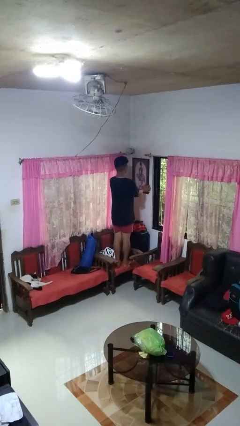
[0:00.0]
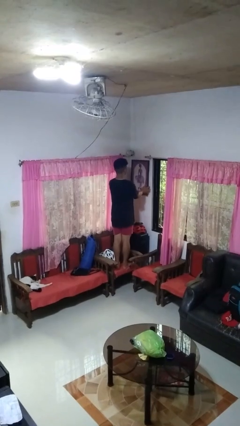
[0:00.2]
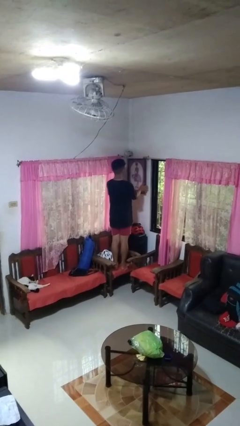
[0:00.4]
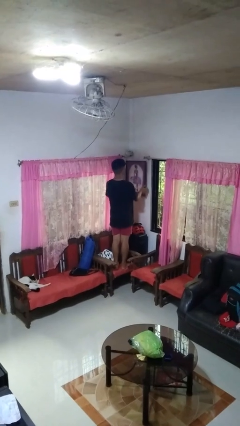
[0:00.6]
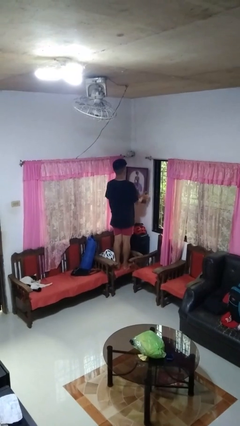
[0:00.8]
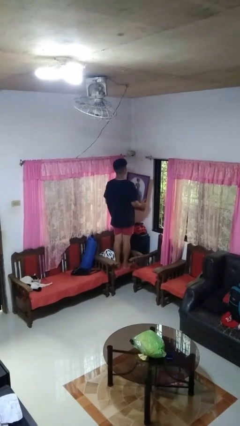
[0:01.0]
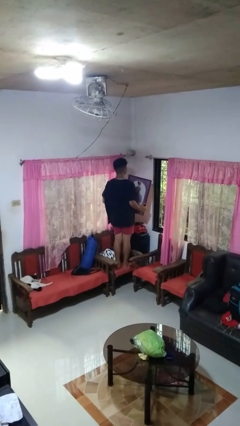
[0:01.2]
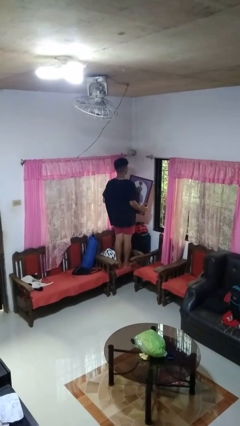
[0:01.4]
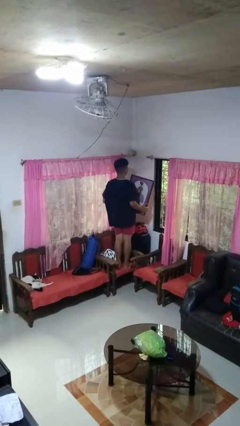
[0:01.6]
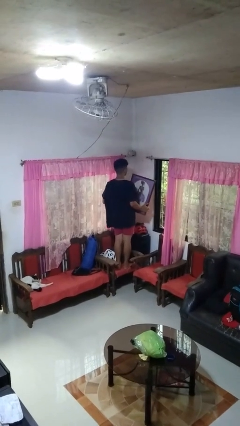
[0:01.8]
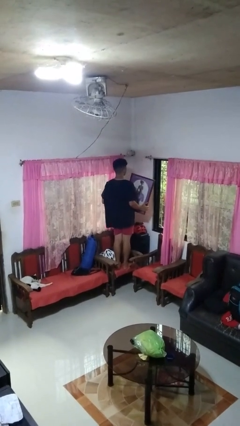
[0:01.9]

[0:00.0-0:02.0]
person takes down picture frame

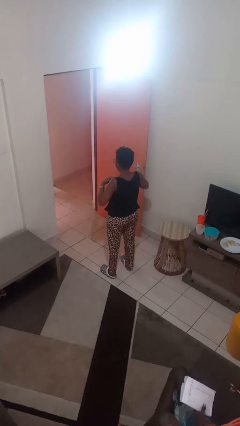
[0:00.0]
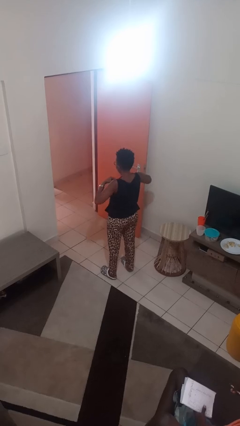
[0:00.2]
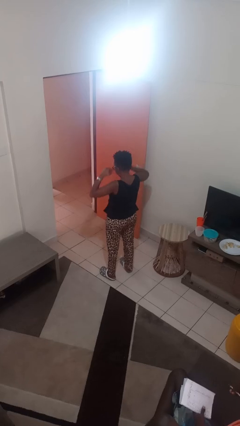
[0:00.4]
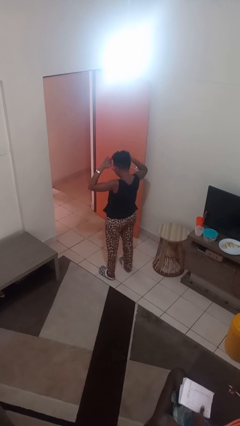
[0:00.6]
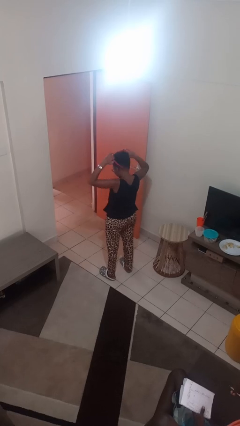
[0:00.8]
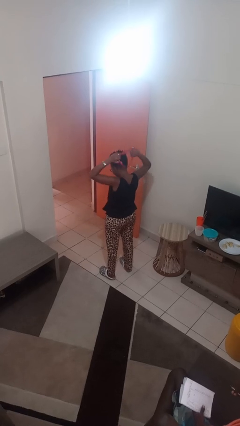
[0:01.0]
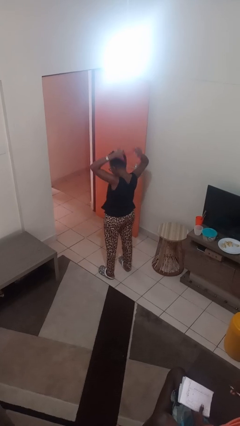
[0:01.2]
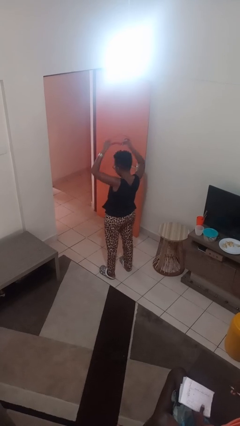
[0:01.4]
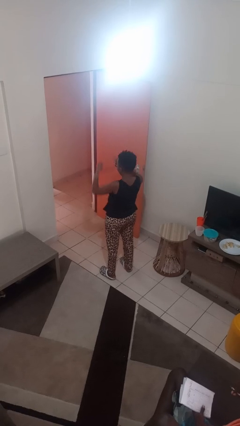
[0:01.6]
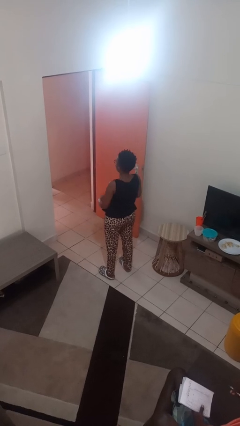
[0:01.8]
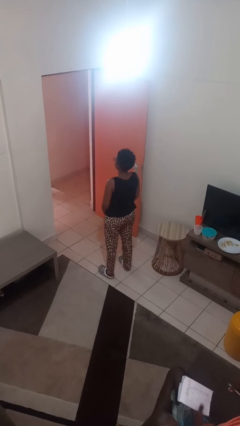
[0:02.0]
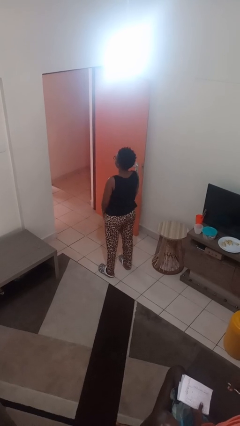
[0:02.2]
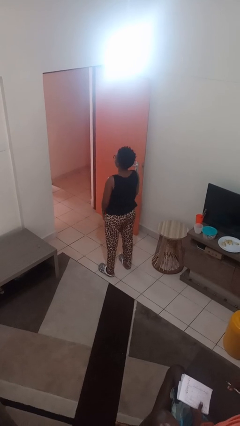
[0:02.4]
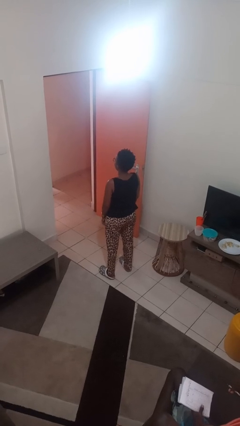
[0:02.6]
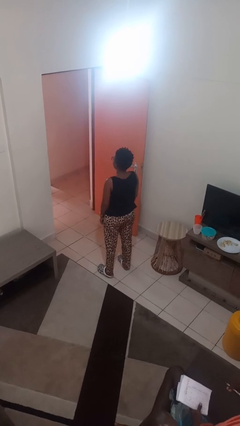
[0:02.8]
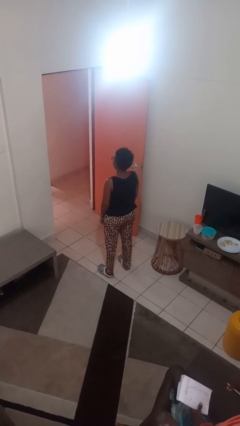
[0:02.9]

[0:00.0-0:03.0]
person takes off necklace

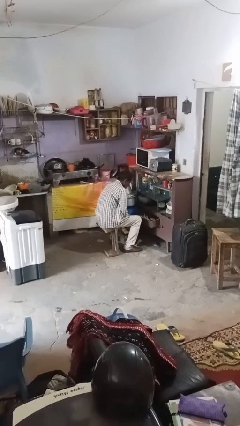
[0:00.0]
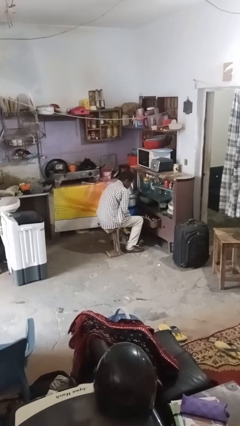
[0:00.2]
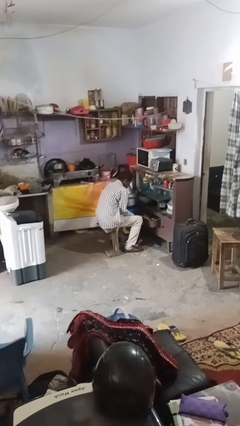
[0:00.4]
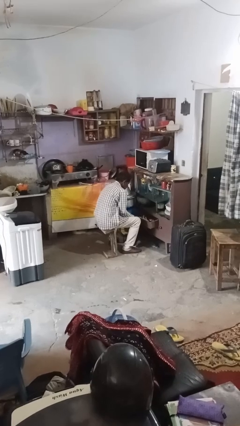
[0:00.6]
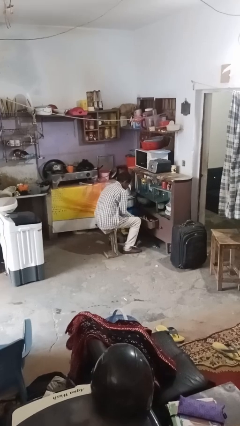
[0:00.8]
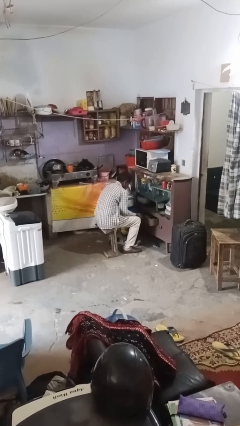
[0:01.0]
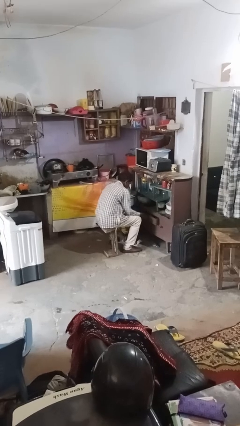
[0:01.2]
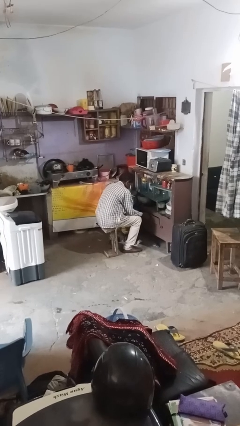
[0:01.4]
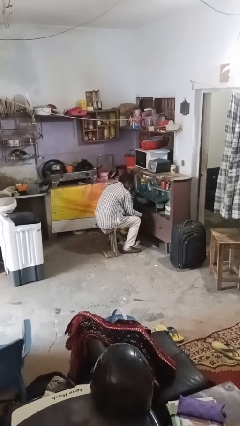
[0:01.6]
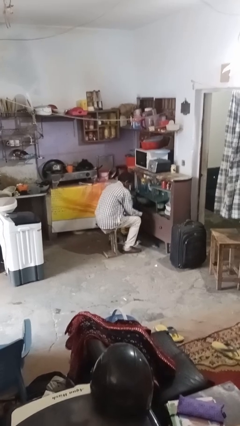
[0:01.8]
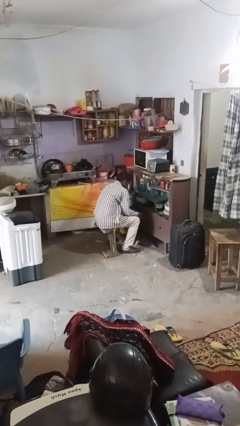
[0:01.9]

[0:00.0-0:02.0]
person closes kitchen drawer

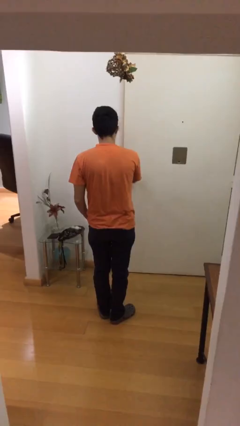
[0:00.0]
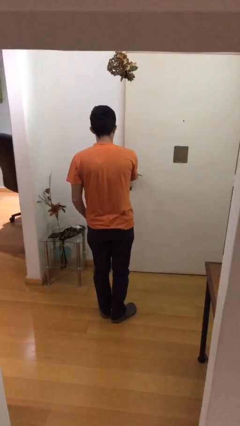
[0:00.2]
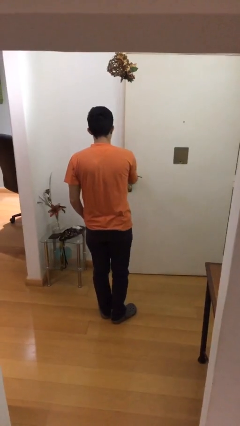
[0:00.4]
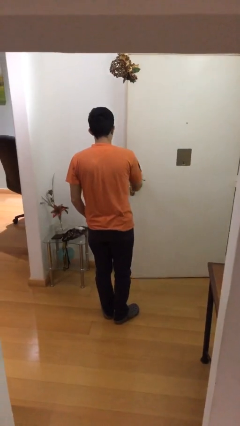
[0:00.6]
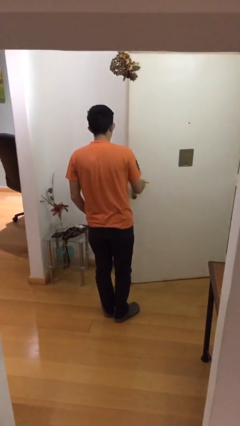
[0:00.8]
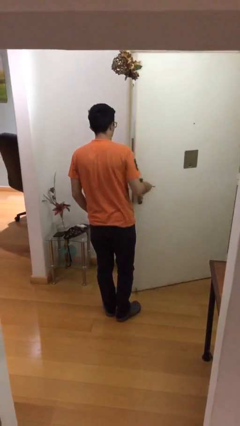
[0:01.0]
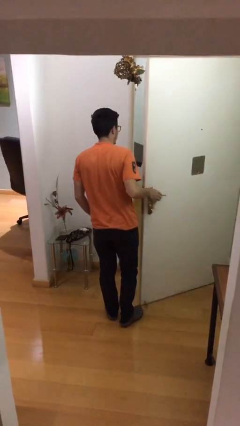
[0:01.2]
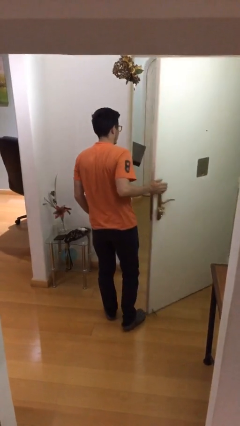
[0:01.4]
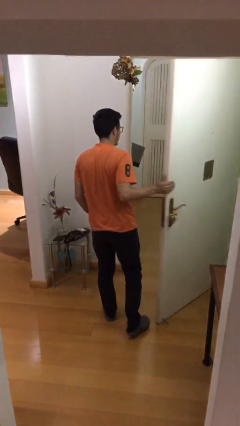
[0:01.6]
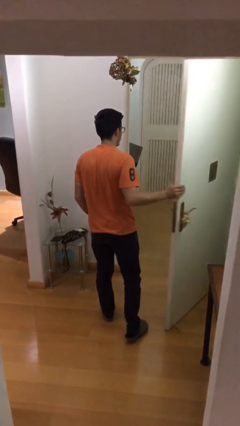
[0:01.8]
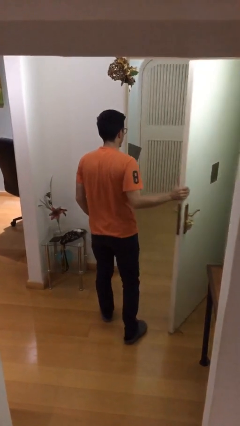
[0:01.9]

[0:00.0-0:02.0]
person opens facility door

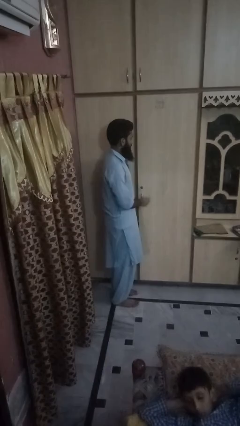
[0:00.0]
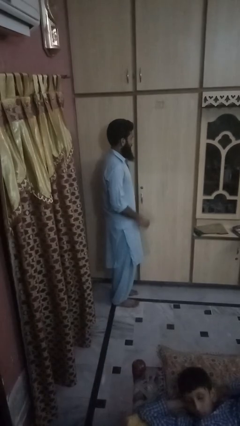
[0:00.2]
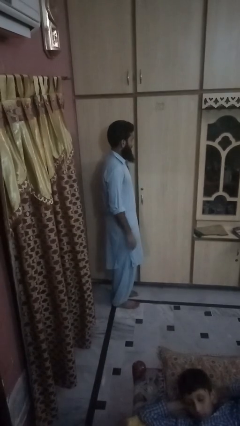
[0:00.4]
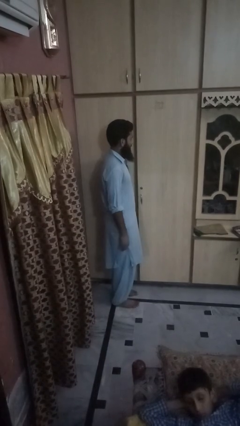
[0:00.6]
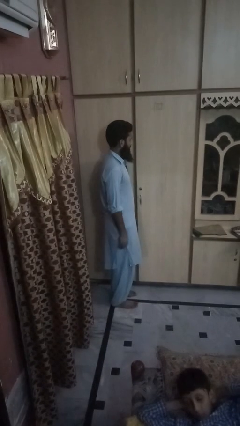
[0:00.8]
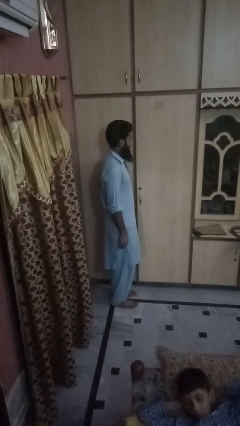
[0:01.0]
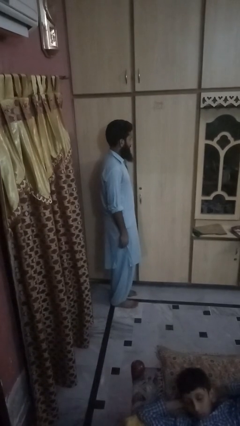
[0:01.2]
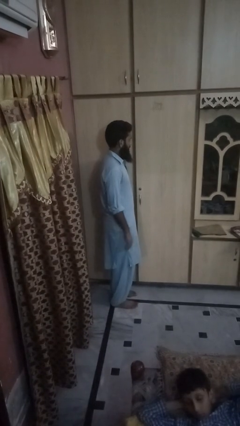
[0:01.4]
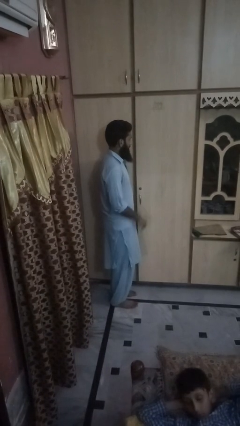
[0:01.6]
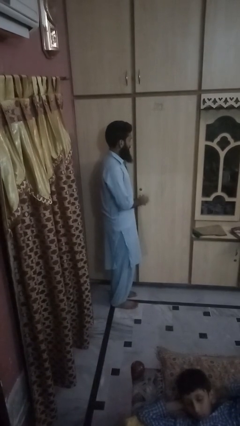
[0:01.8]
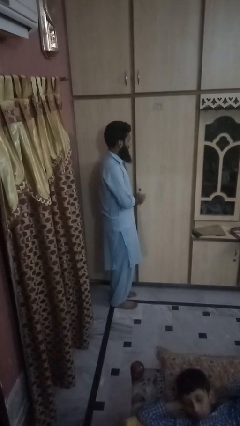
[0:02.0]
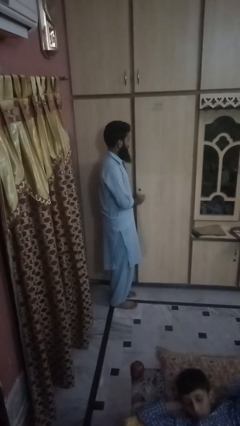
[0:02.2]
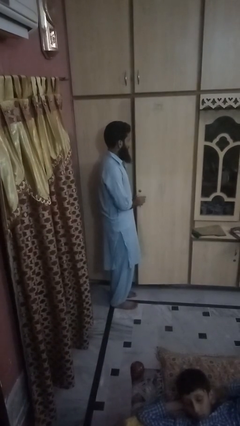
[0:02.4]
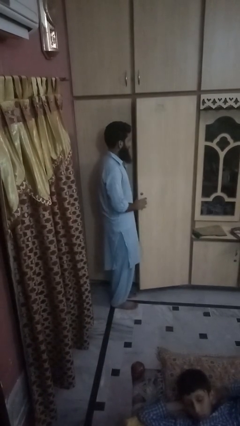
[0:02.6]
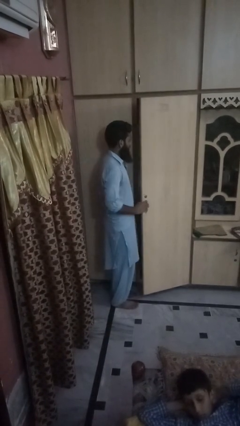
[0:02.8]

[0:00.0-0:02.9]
person opens dresser drawer

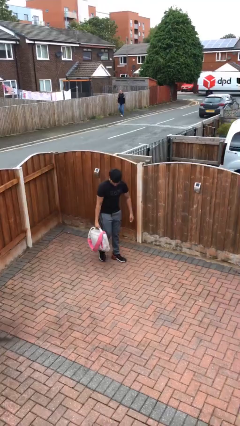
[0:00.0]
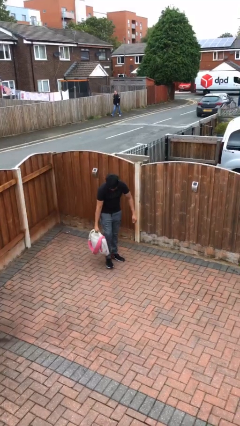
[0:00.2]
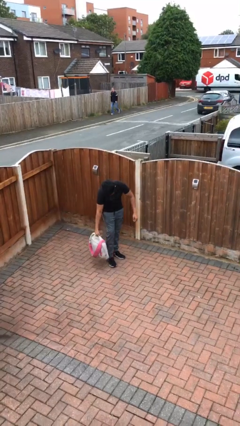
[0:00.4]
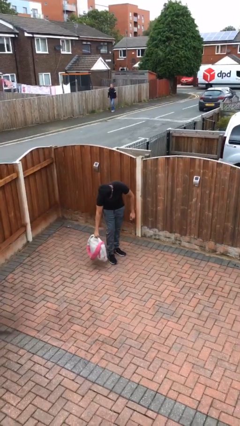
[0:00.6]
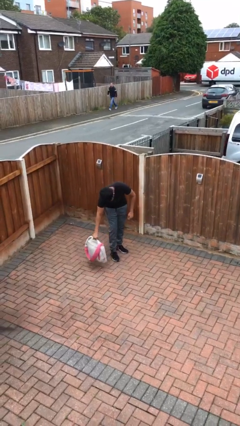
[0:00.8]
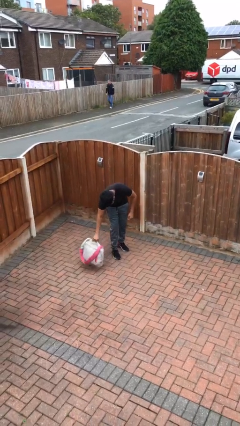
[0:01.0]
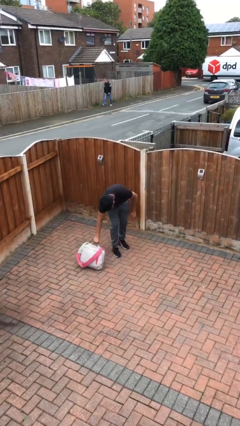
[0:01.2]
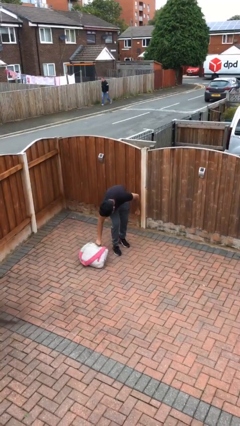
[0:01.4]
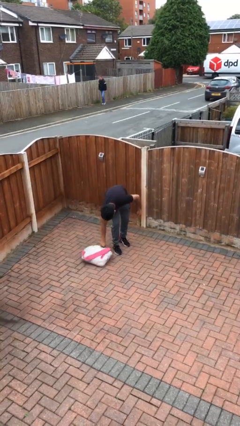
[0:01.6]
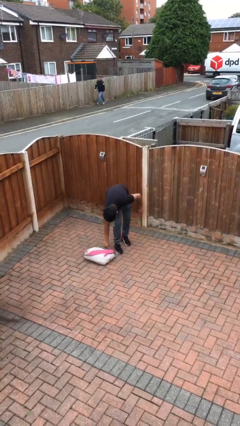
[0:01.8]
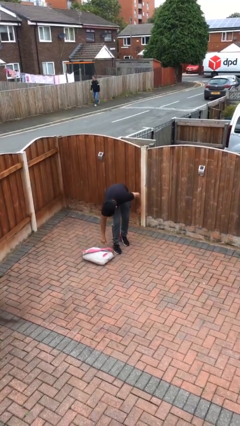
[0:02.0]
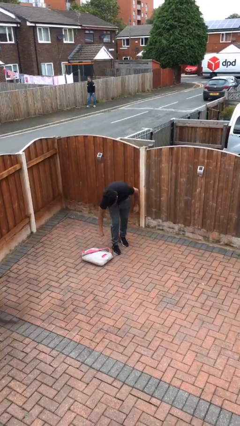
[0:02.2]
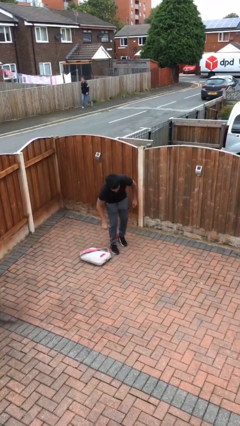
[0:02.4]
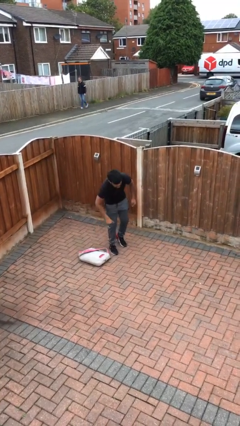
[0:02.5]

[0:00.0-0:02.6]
person puts down object on floor

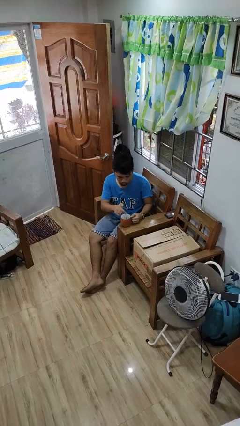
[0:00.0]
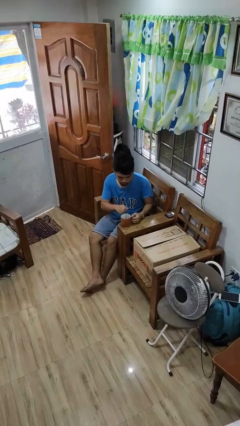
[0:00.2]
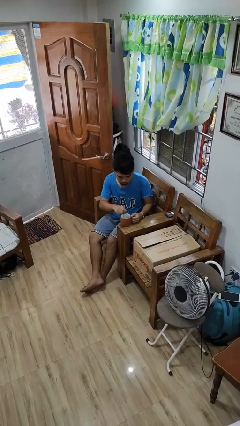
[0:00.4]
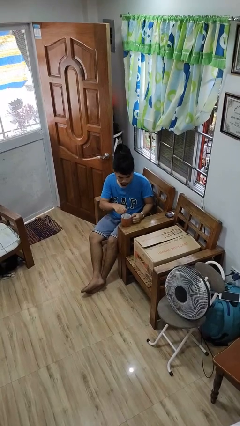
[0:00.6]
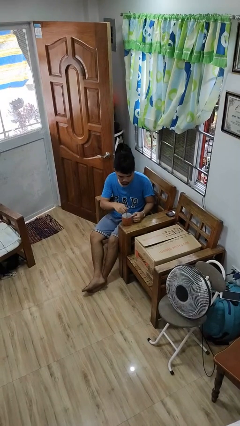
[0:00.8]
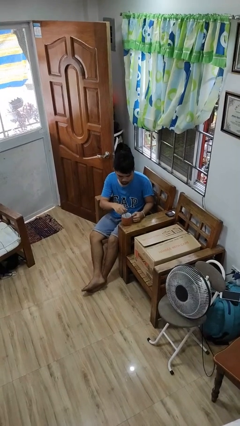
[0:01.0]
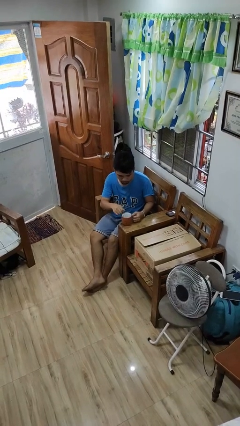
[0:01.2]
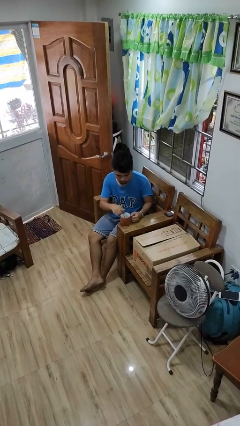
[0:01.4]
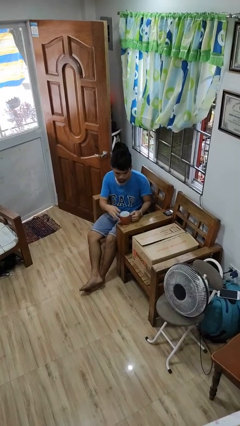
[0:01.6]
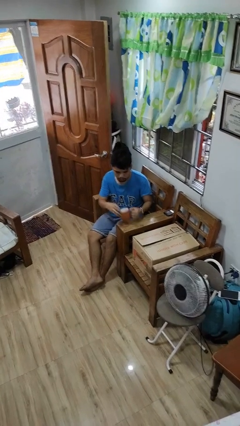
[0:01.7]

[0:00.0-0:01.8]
person stirs mug

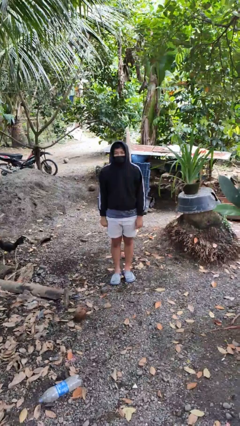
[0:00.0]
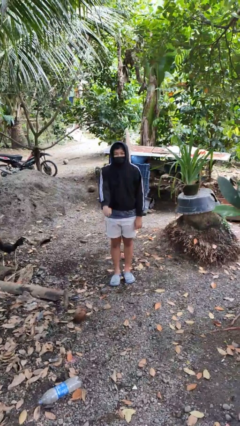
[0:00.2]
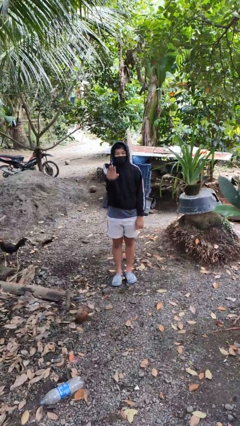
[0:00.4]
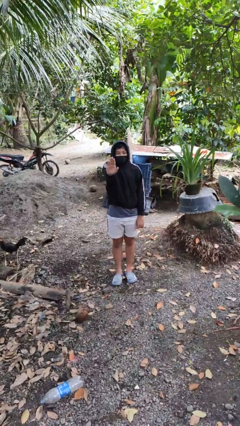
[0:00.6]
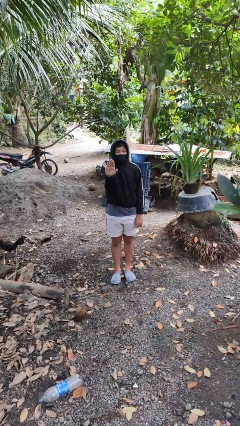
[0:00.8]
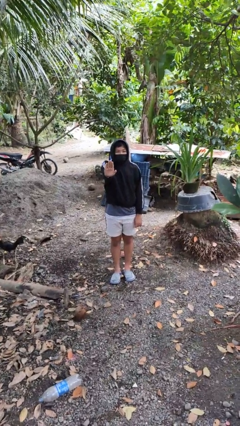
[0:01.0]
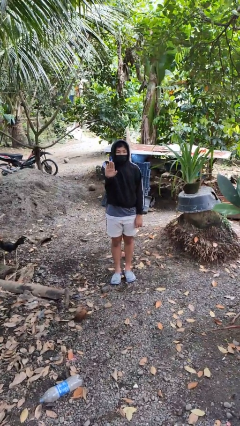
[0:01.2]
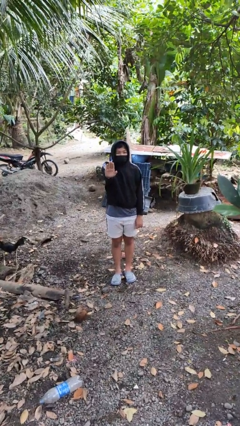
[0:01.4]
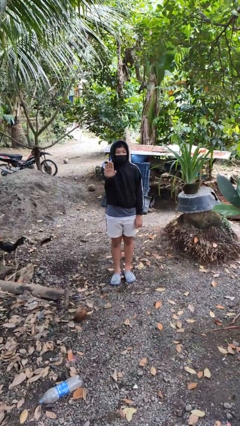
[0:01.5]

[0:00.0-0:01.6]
person gestures stop
